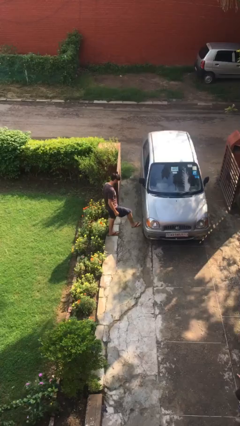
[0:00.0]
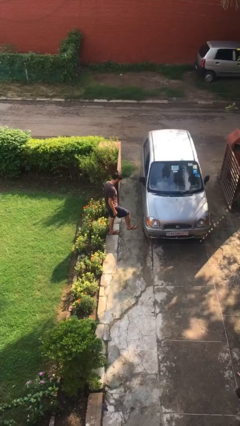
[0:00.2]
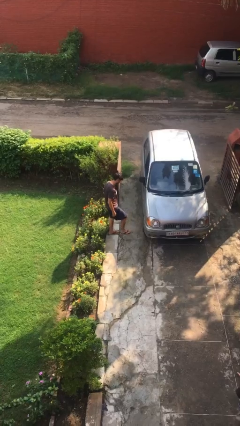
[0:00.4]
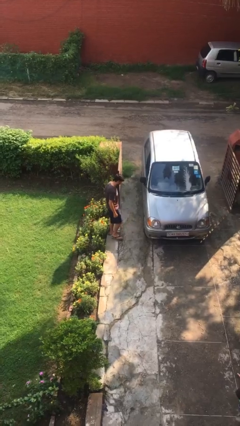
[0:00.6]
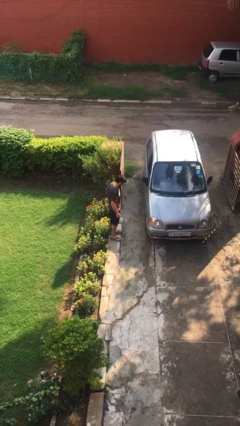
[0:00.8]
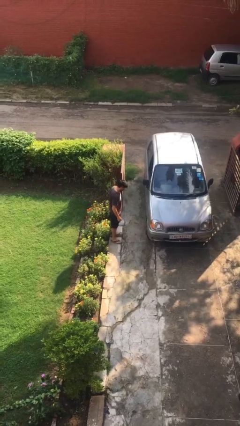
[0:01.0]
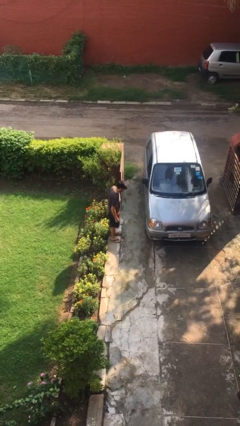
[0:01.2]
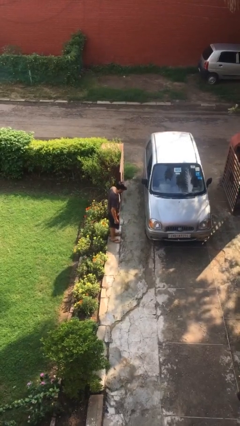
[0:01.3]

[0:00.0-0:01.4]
person kicks car tires

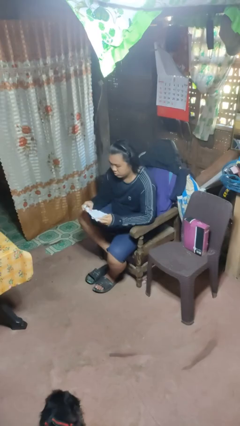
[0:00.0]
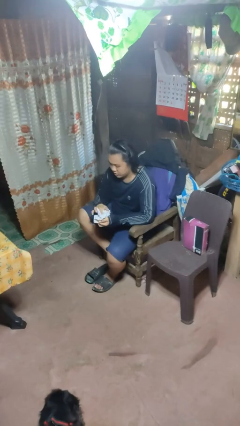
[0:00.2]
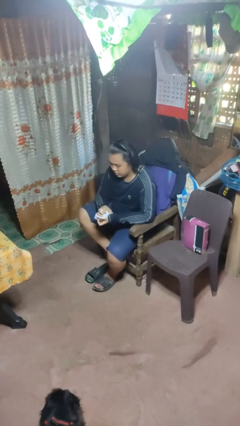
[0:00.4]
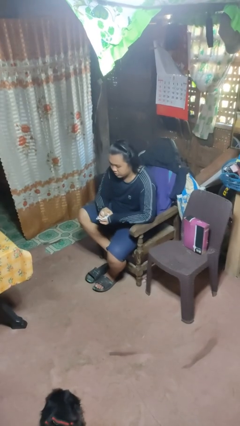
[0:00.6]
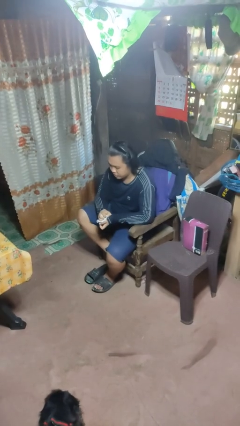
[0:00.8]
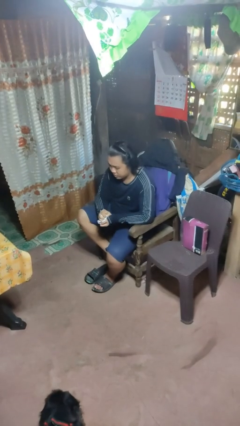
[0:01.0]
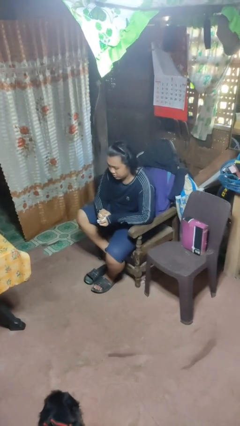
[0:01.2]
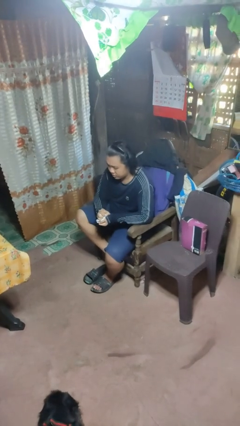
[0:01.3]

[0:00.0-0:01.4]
person crumples paper

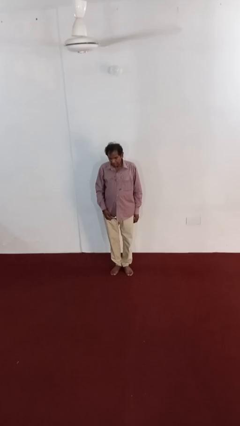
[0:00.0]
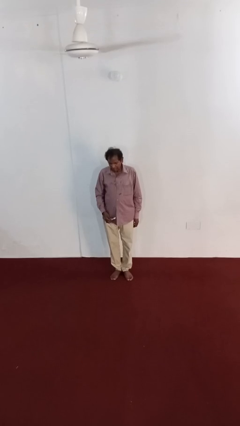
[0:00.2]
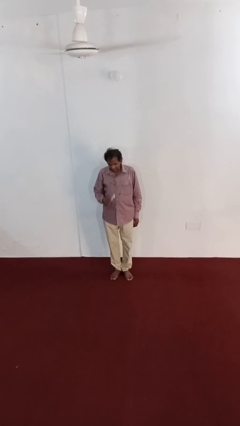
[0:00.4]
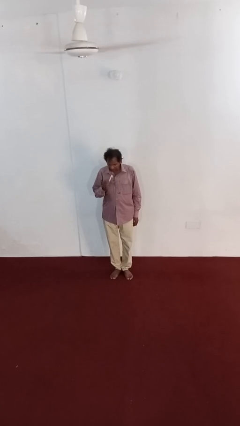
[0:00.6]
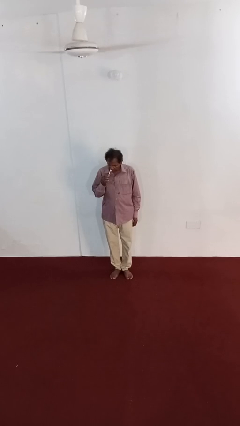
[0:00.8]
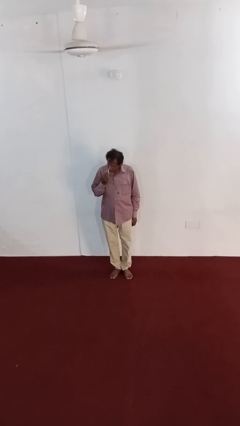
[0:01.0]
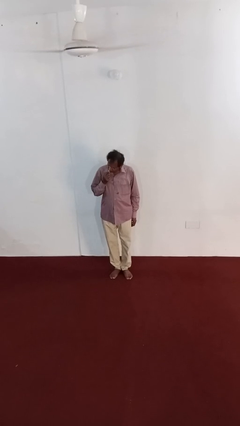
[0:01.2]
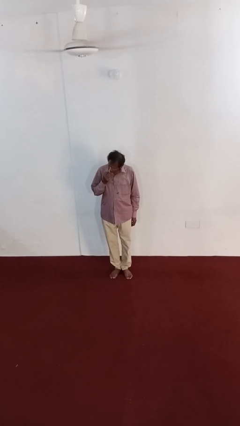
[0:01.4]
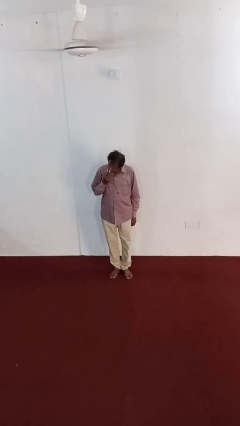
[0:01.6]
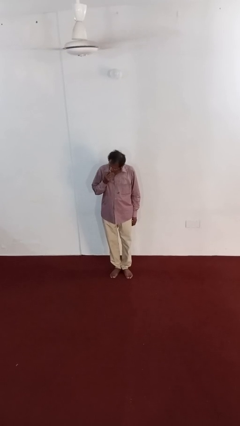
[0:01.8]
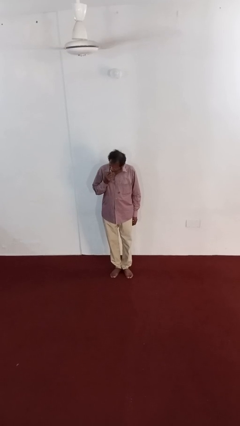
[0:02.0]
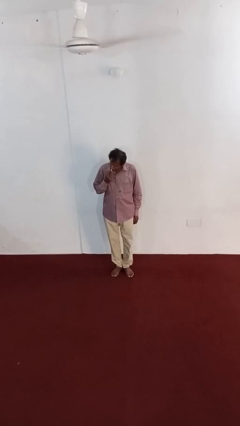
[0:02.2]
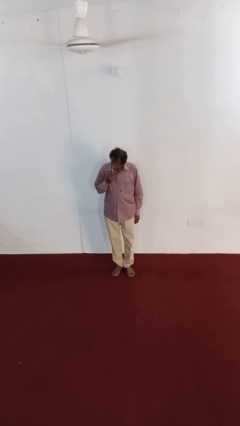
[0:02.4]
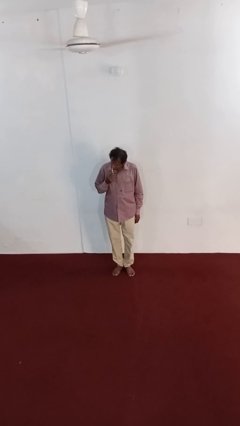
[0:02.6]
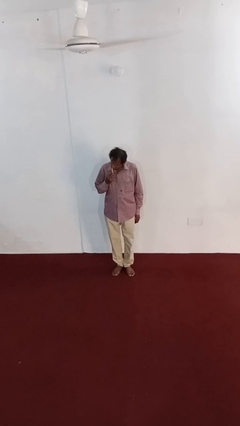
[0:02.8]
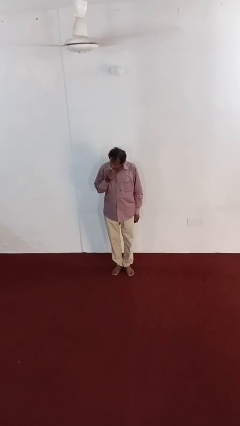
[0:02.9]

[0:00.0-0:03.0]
person brushes teeth

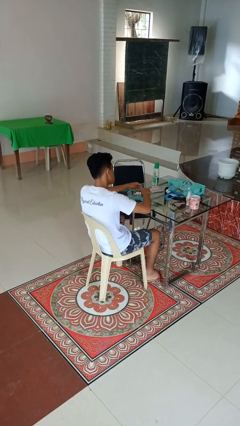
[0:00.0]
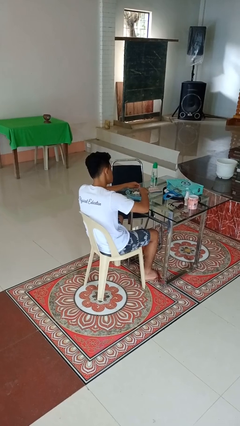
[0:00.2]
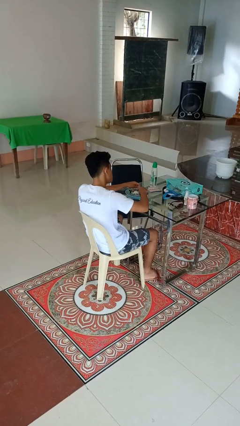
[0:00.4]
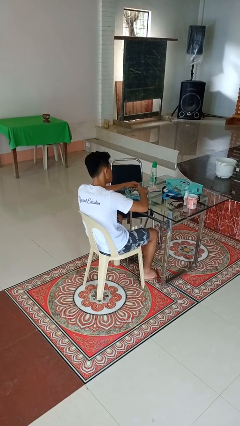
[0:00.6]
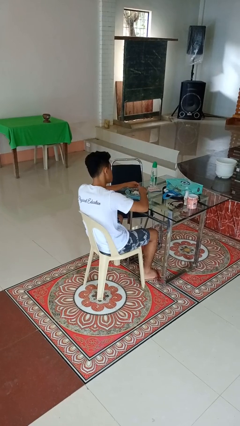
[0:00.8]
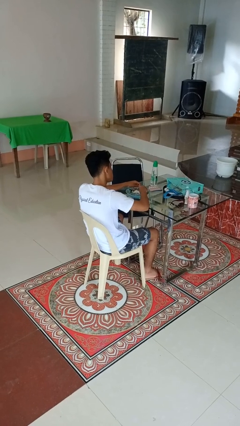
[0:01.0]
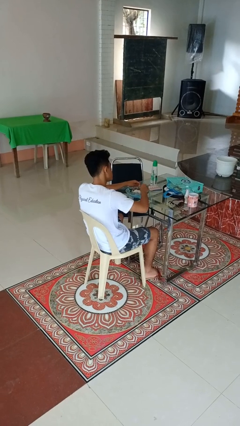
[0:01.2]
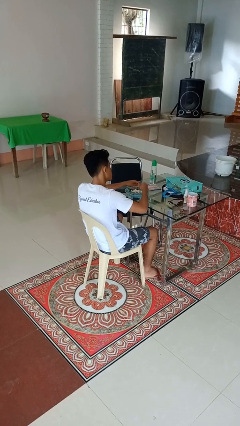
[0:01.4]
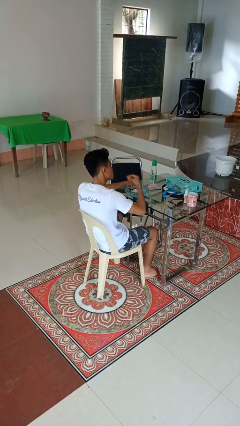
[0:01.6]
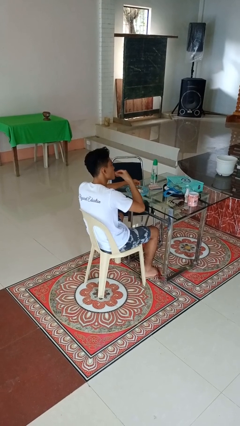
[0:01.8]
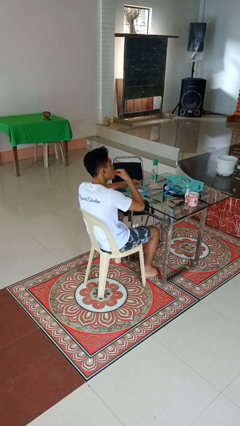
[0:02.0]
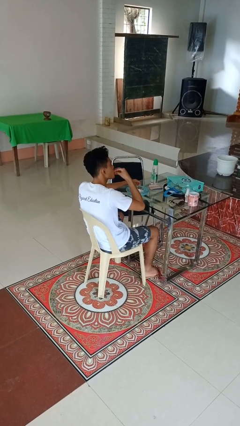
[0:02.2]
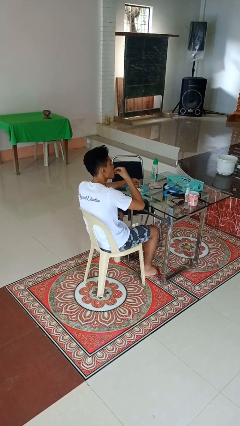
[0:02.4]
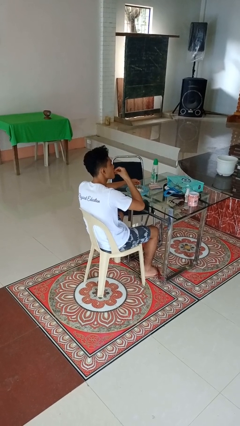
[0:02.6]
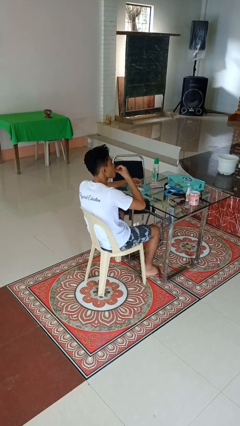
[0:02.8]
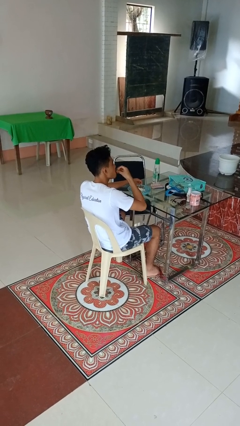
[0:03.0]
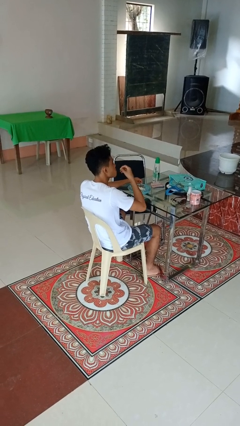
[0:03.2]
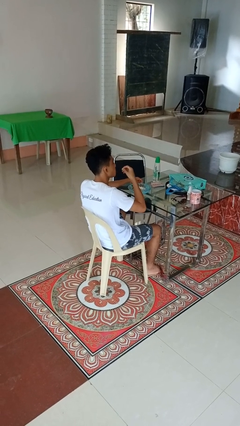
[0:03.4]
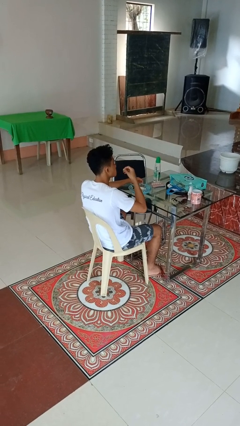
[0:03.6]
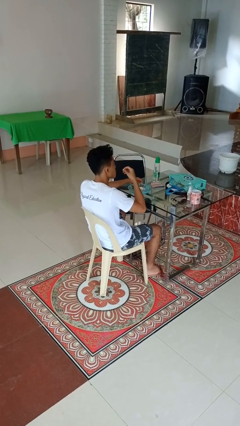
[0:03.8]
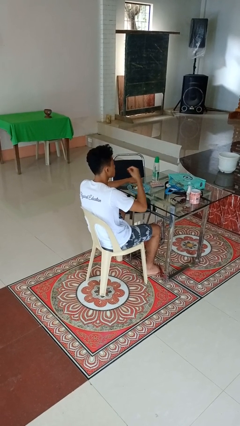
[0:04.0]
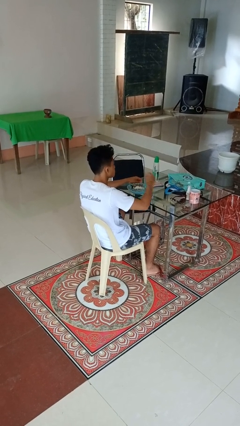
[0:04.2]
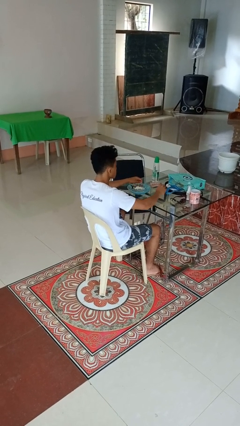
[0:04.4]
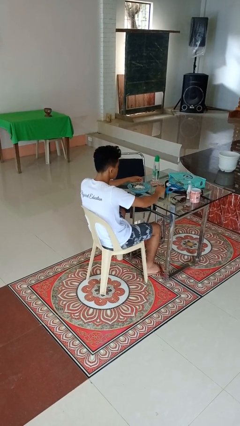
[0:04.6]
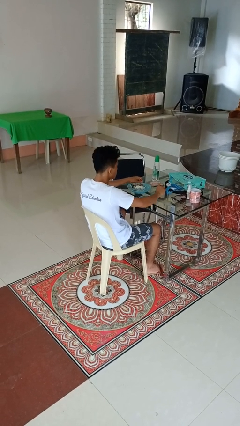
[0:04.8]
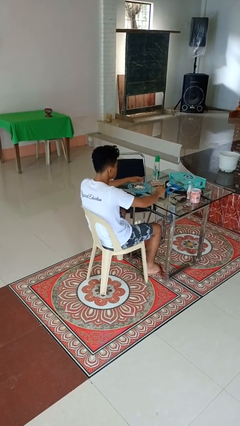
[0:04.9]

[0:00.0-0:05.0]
person eats with hands

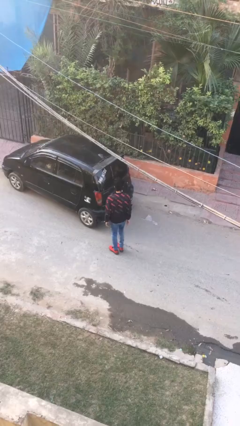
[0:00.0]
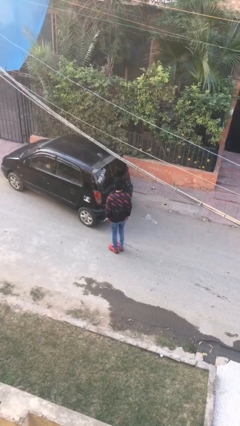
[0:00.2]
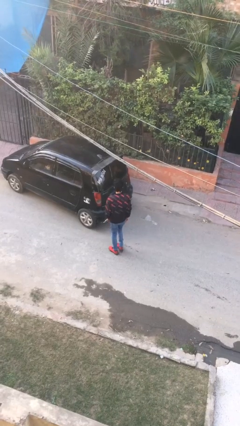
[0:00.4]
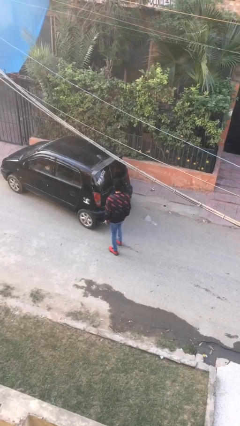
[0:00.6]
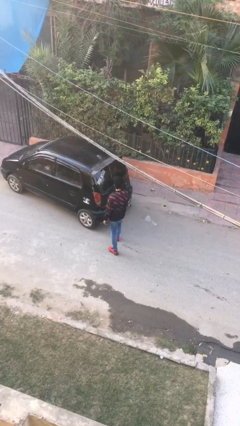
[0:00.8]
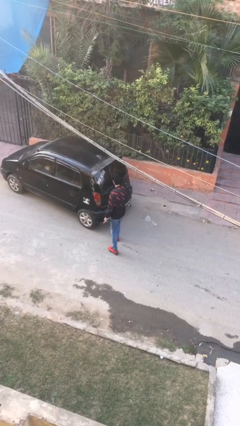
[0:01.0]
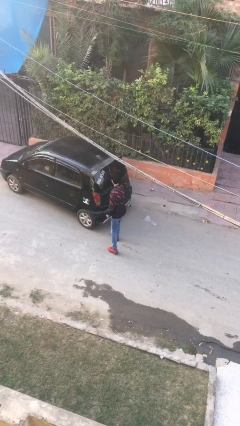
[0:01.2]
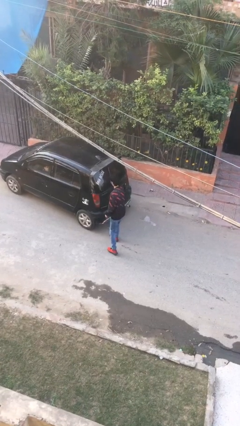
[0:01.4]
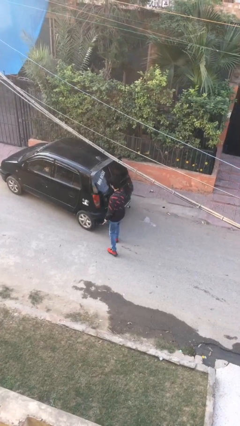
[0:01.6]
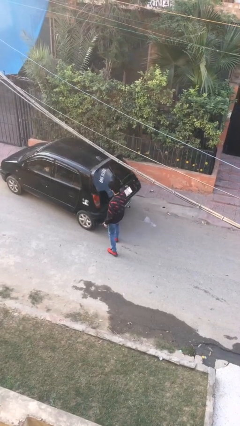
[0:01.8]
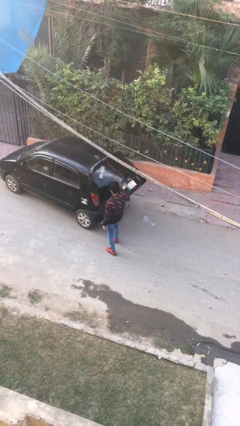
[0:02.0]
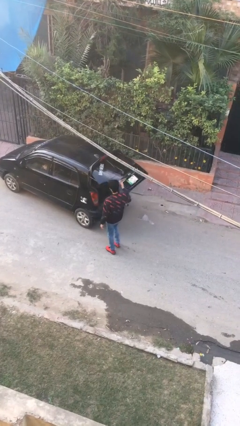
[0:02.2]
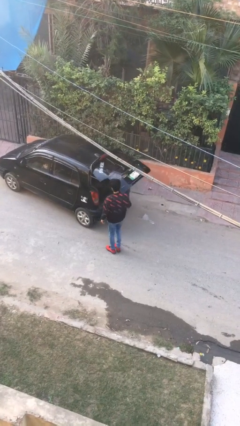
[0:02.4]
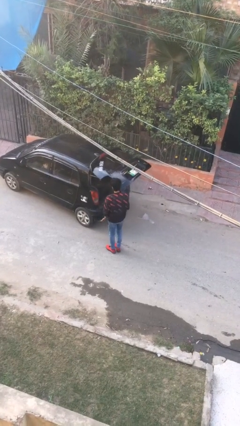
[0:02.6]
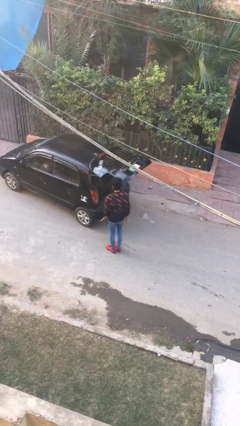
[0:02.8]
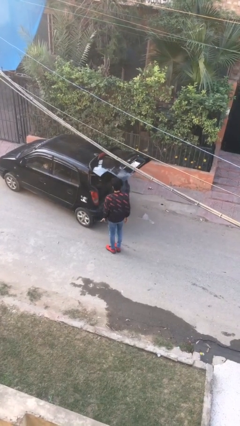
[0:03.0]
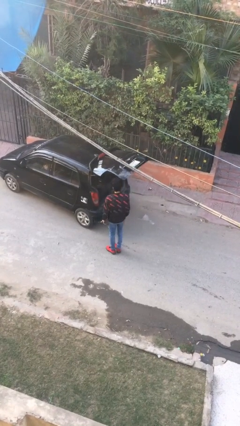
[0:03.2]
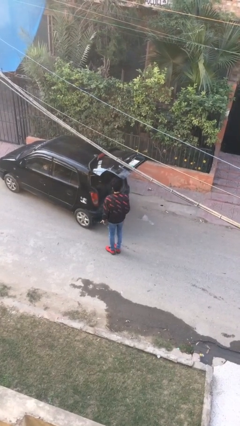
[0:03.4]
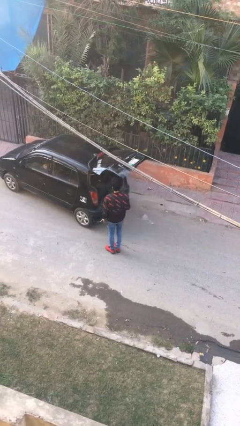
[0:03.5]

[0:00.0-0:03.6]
person opens car trunk

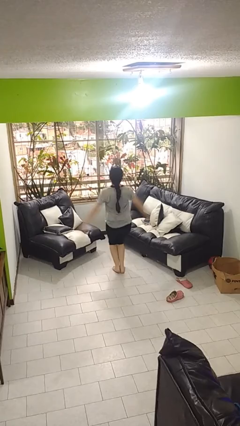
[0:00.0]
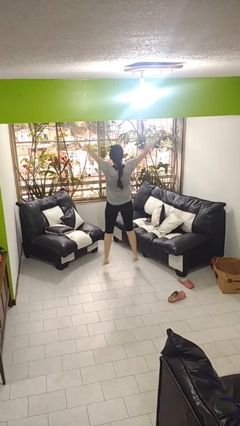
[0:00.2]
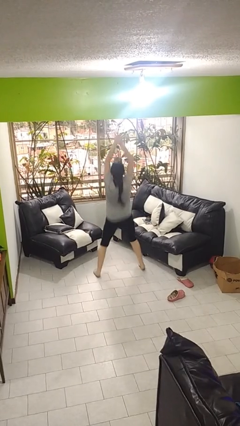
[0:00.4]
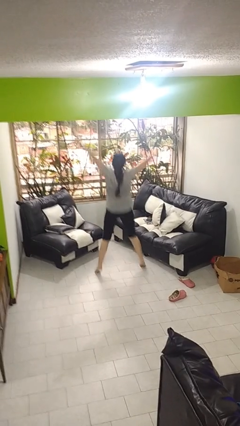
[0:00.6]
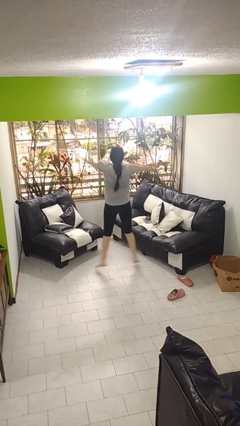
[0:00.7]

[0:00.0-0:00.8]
person exercises with jumping jacks

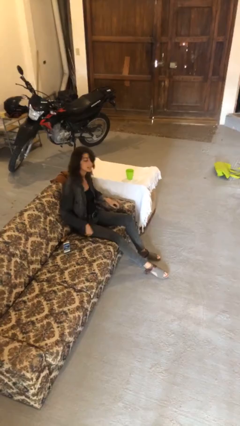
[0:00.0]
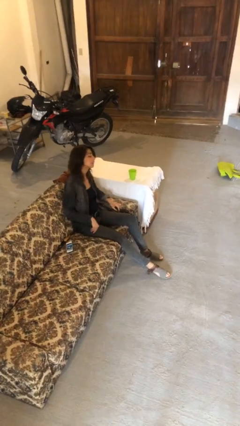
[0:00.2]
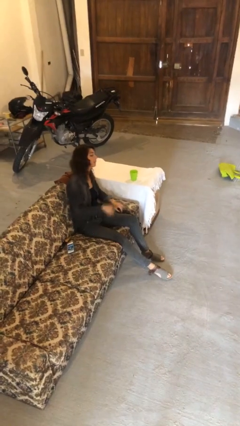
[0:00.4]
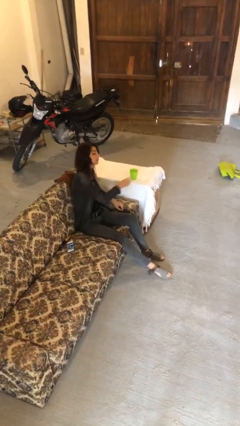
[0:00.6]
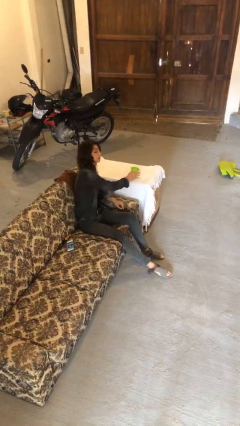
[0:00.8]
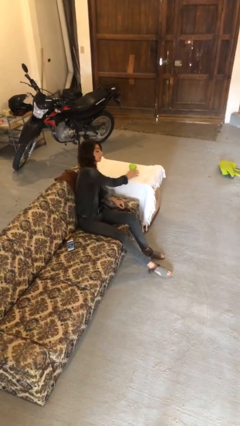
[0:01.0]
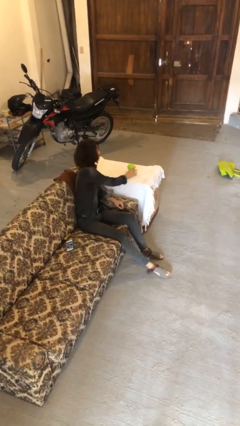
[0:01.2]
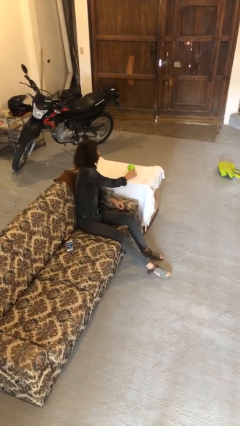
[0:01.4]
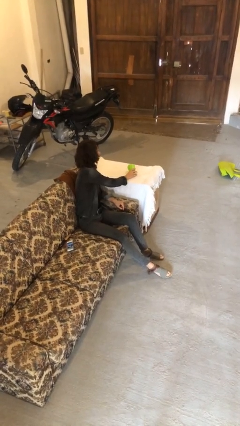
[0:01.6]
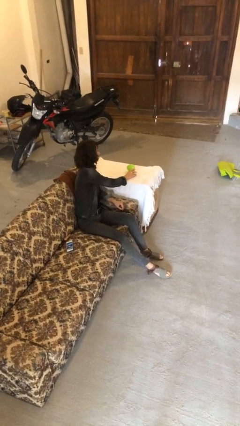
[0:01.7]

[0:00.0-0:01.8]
person knocks over glass

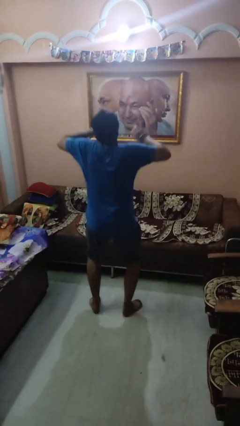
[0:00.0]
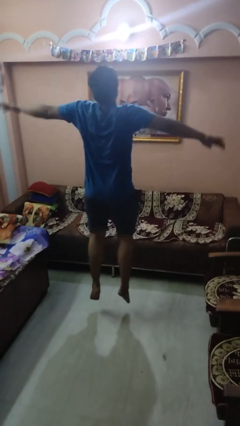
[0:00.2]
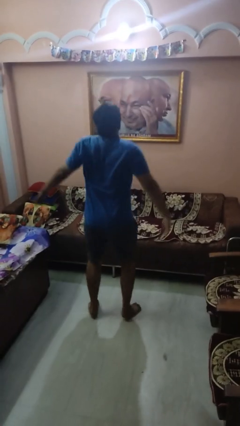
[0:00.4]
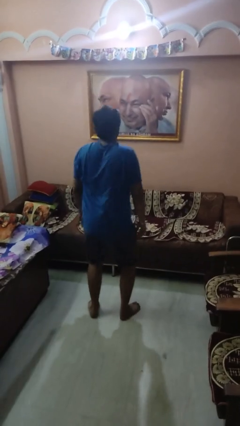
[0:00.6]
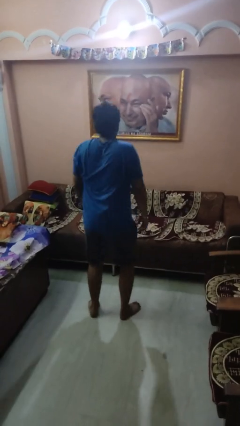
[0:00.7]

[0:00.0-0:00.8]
person jumps
